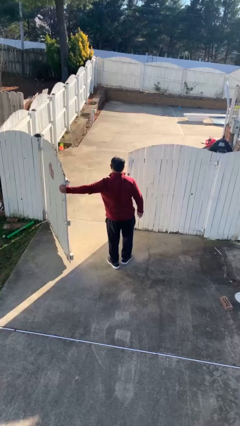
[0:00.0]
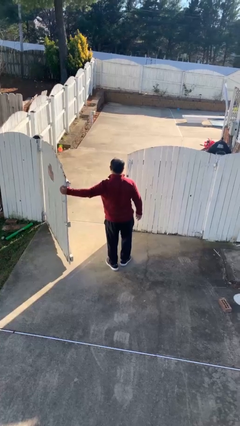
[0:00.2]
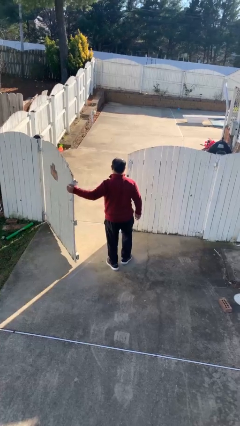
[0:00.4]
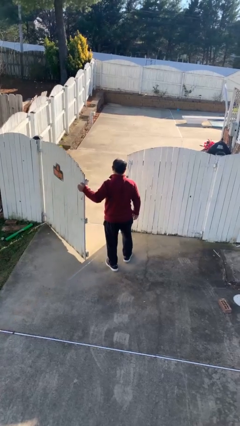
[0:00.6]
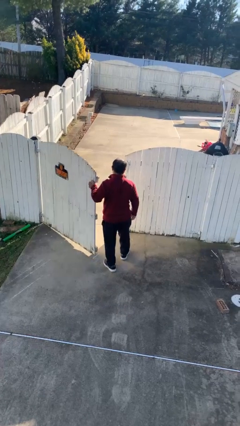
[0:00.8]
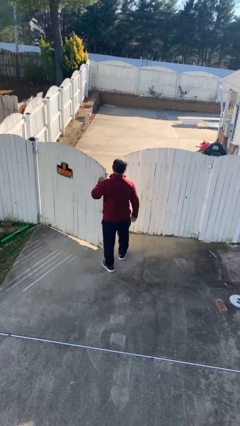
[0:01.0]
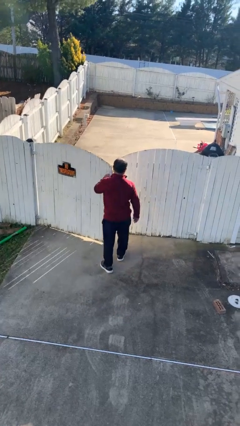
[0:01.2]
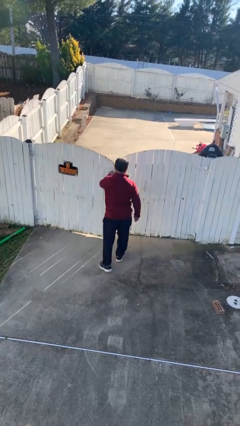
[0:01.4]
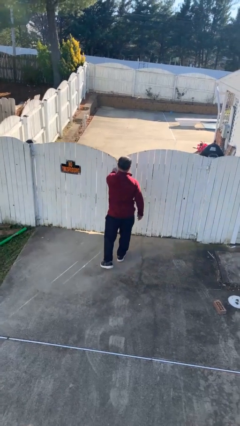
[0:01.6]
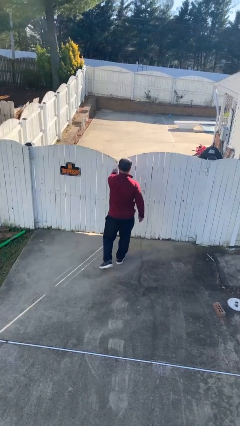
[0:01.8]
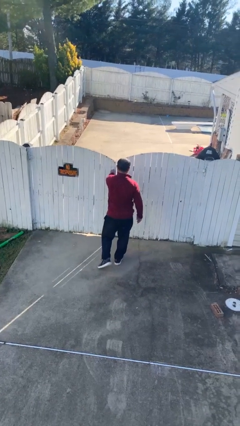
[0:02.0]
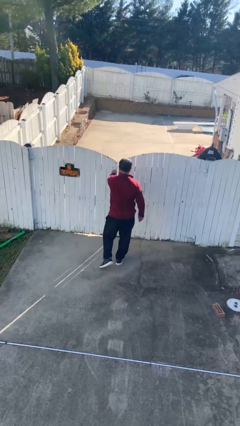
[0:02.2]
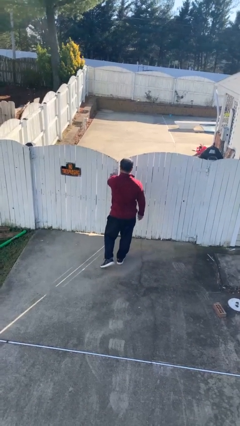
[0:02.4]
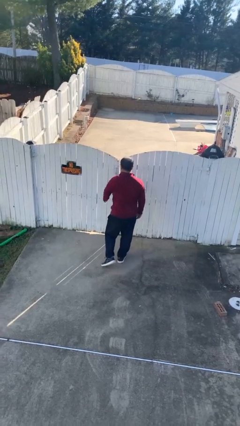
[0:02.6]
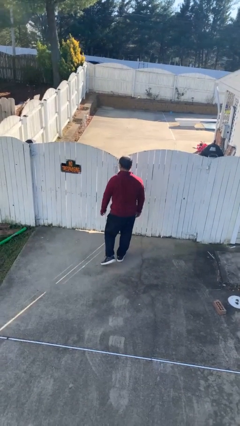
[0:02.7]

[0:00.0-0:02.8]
person closes facility door

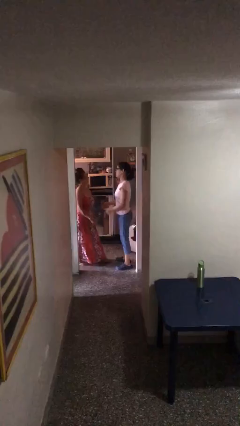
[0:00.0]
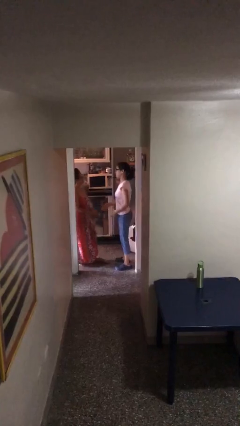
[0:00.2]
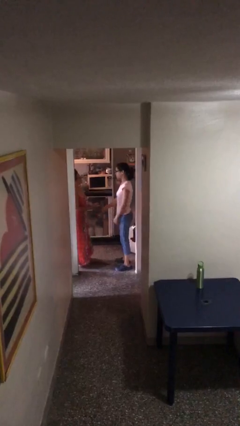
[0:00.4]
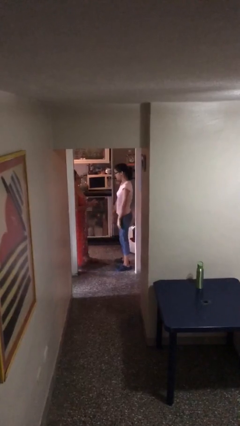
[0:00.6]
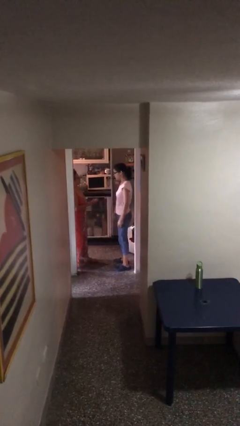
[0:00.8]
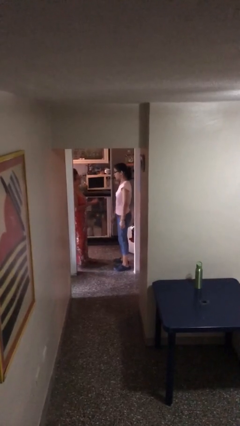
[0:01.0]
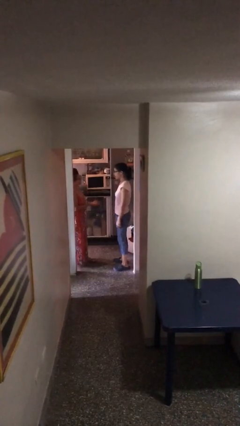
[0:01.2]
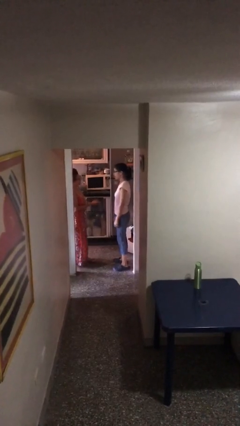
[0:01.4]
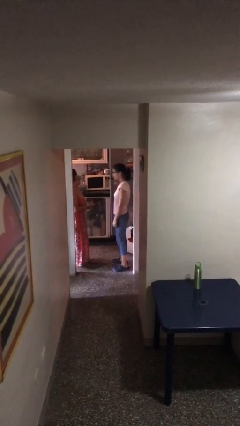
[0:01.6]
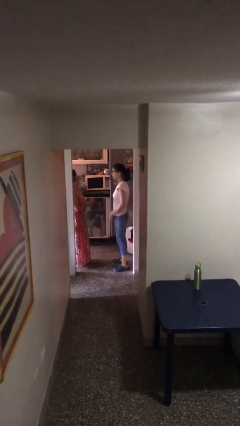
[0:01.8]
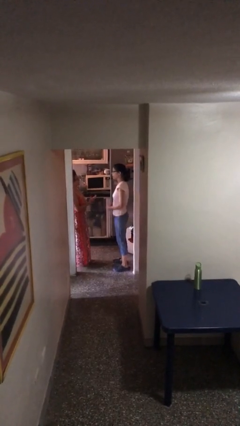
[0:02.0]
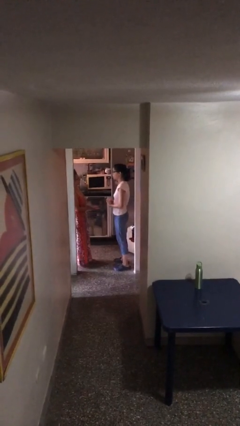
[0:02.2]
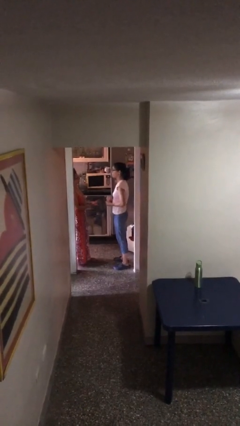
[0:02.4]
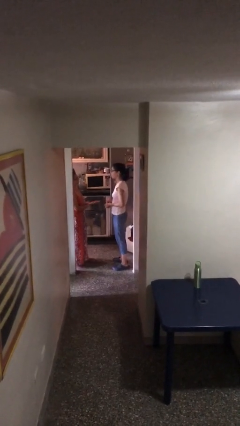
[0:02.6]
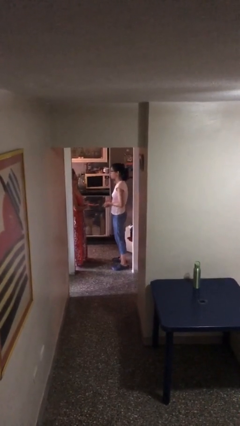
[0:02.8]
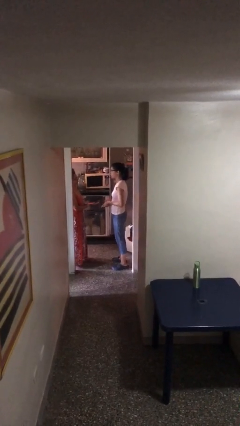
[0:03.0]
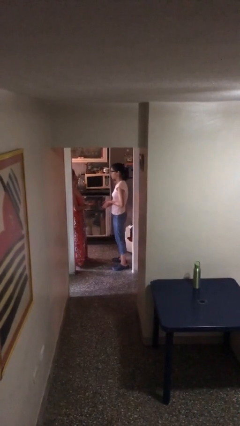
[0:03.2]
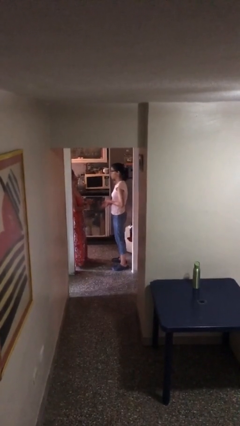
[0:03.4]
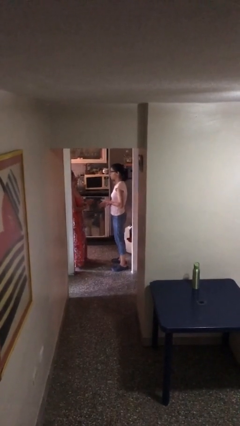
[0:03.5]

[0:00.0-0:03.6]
person talks to person

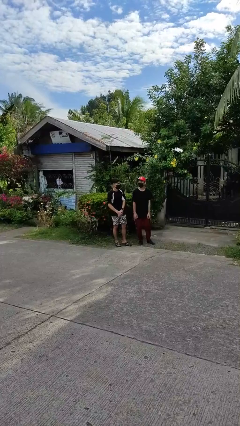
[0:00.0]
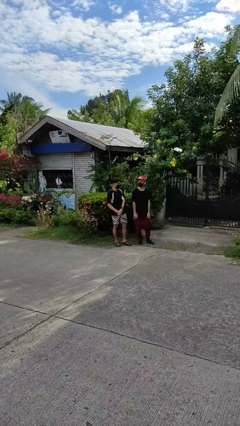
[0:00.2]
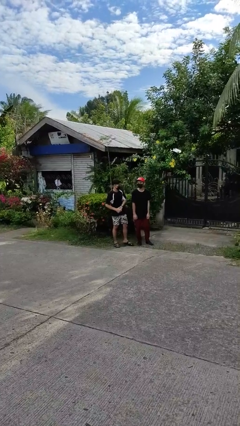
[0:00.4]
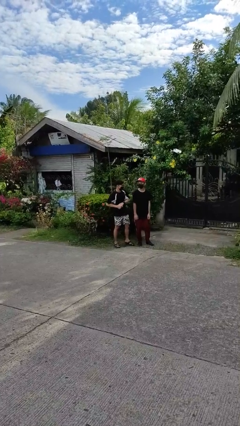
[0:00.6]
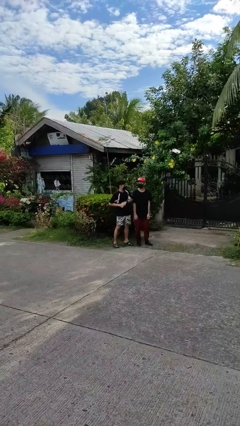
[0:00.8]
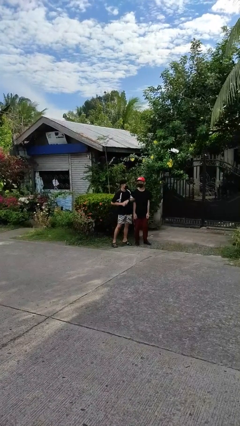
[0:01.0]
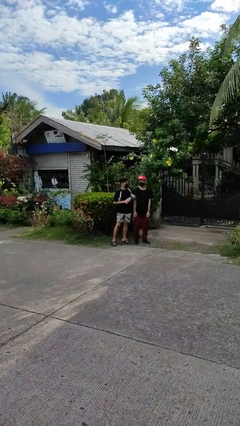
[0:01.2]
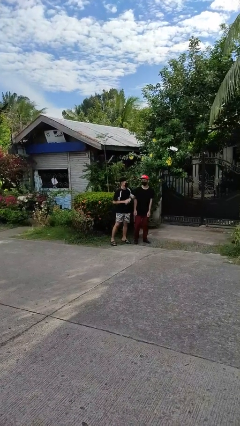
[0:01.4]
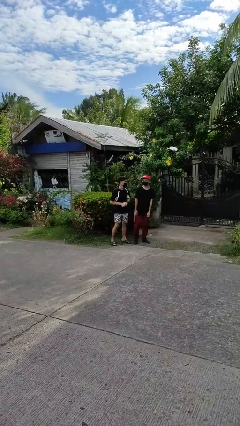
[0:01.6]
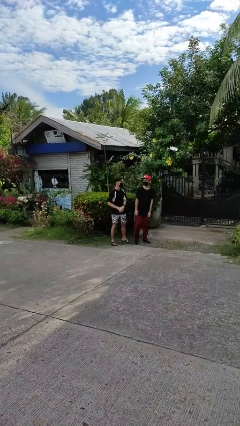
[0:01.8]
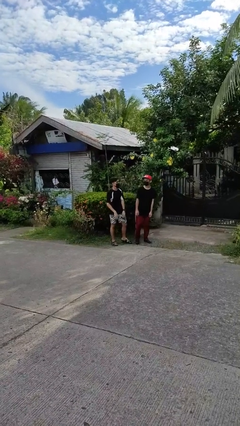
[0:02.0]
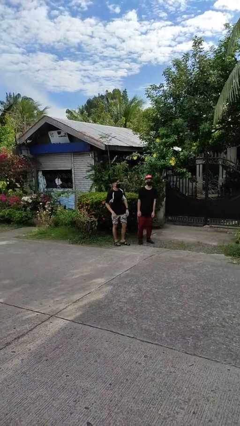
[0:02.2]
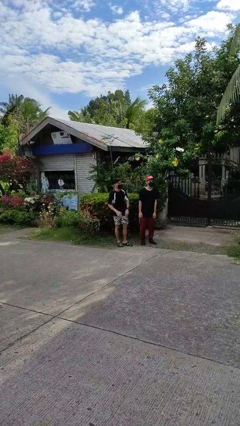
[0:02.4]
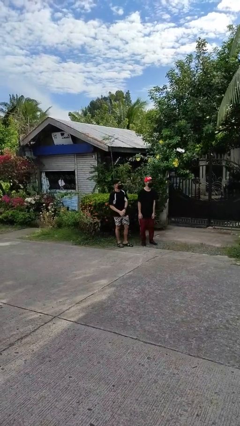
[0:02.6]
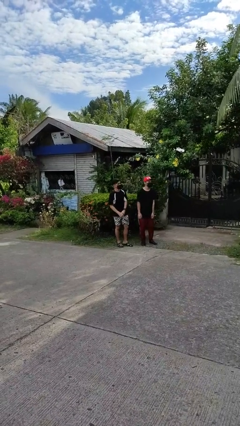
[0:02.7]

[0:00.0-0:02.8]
person nudges person with elbow

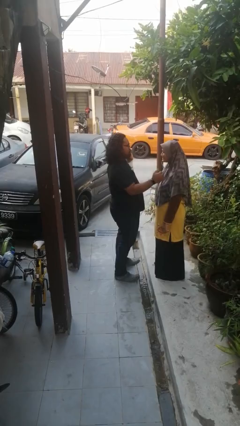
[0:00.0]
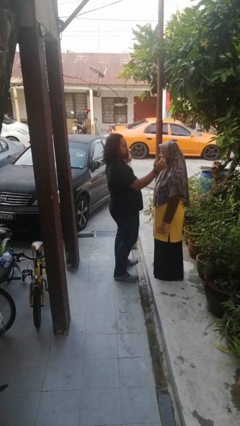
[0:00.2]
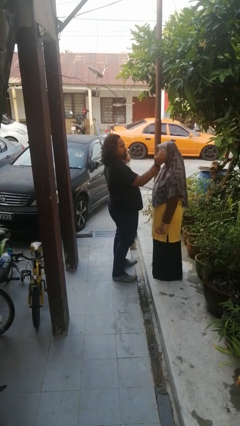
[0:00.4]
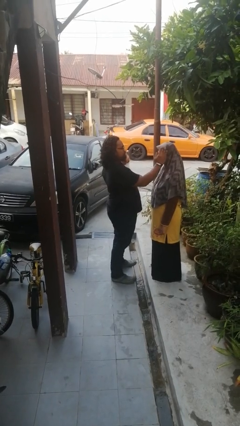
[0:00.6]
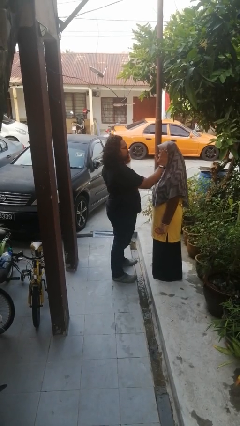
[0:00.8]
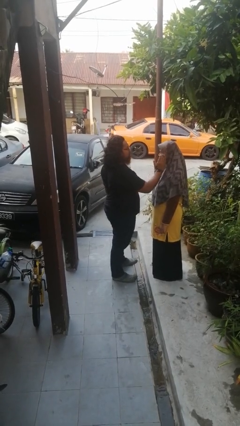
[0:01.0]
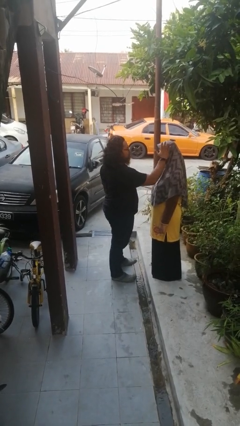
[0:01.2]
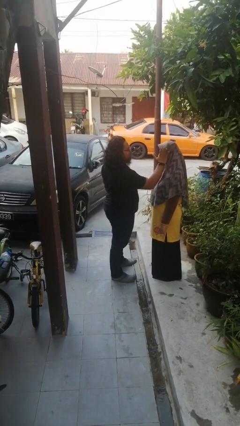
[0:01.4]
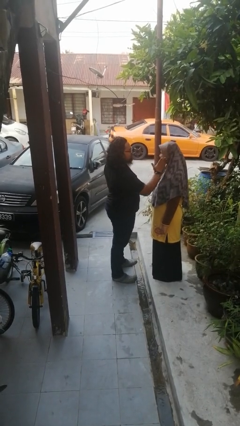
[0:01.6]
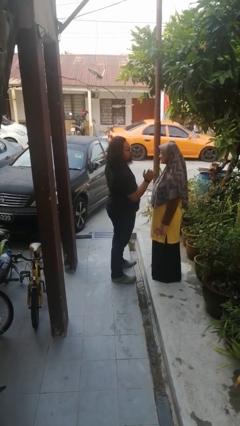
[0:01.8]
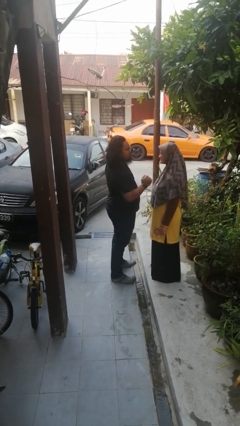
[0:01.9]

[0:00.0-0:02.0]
person touches face of person

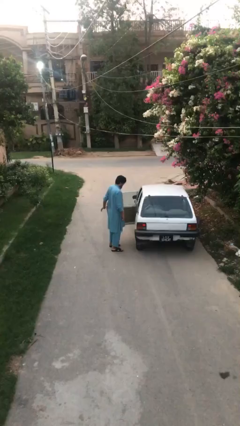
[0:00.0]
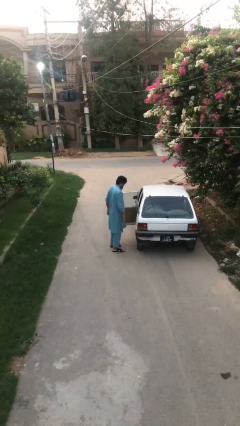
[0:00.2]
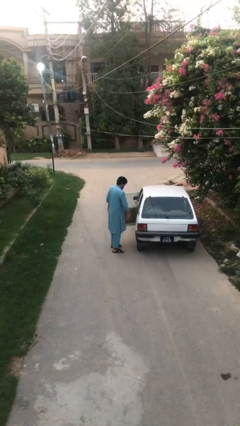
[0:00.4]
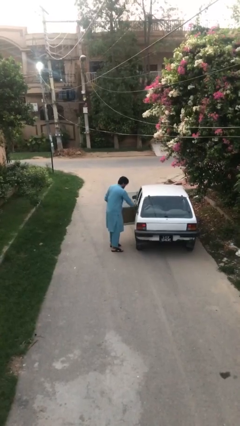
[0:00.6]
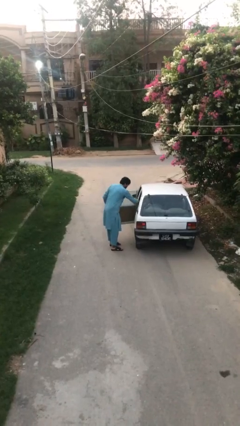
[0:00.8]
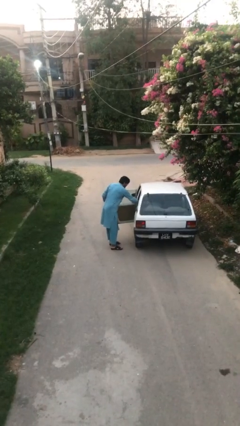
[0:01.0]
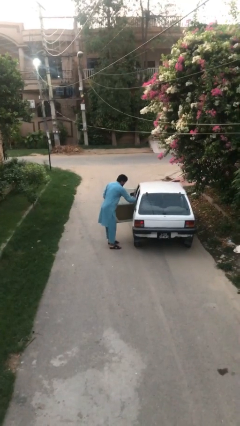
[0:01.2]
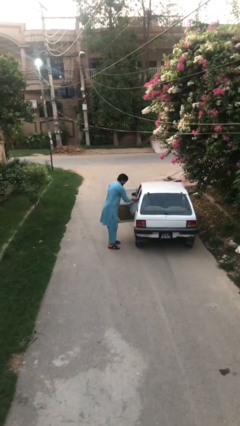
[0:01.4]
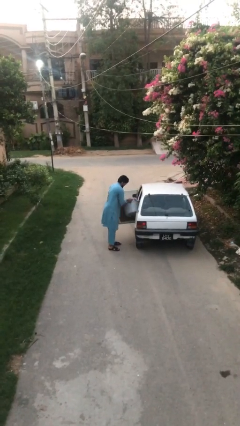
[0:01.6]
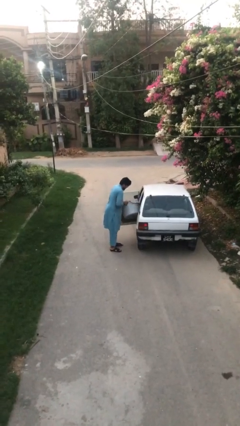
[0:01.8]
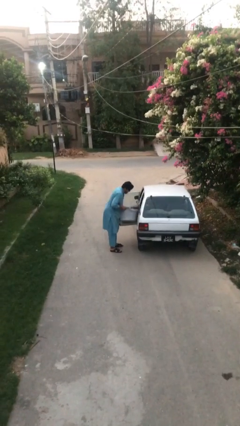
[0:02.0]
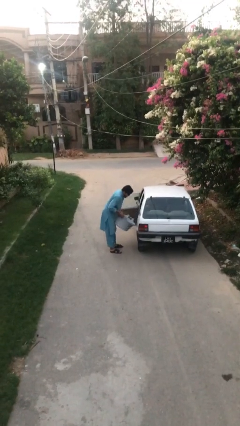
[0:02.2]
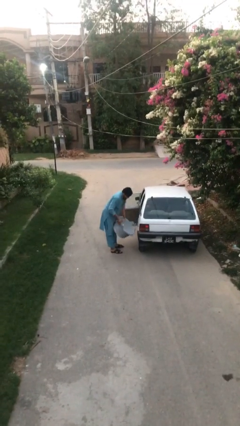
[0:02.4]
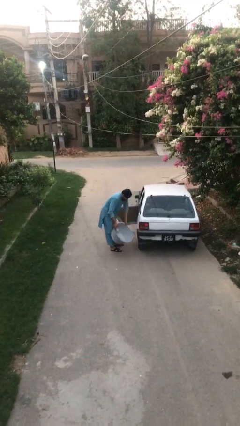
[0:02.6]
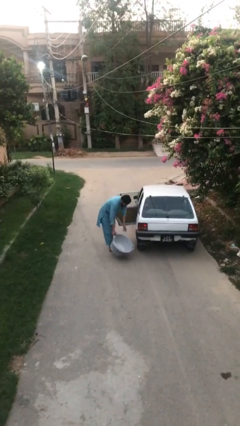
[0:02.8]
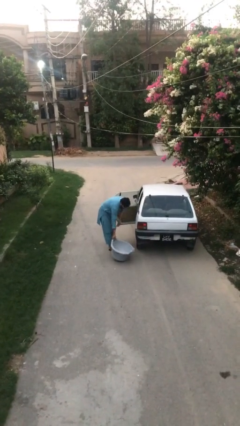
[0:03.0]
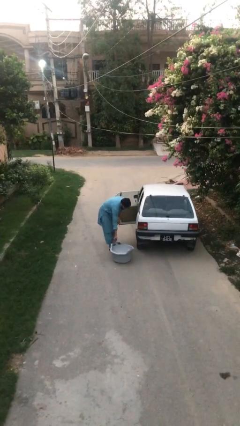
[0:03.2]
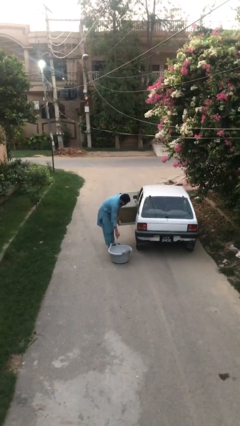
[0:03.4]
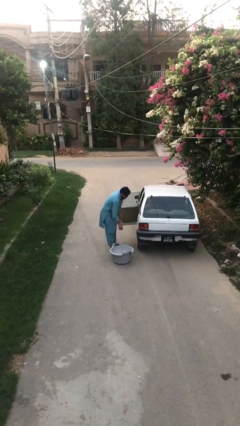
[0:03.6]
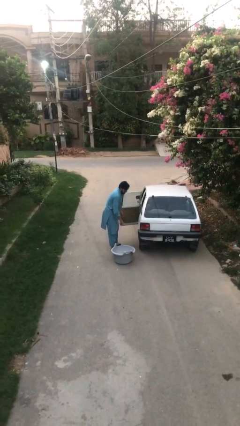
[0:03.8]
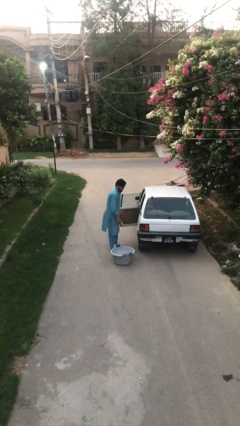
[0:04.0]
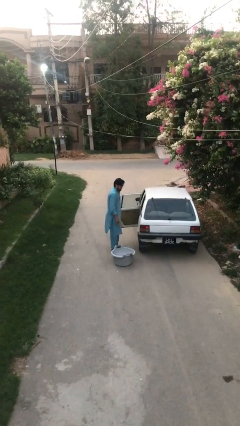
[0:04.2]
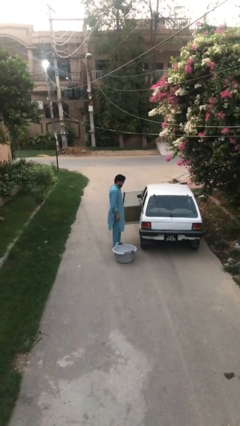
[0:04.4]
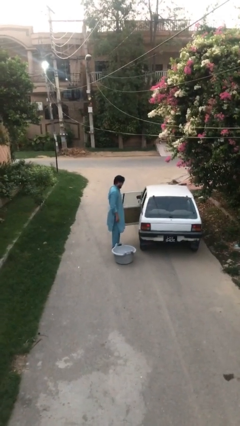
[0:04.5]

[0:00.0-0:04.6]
person unloads car

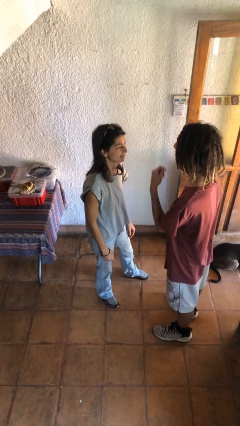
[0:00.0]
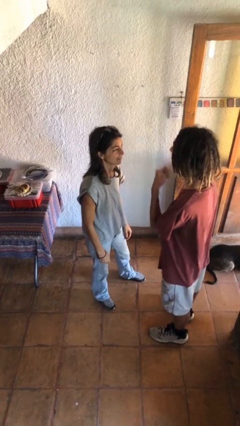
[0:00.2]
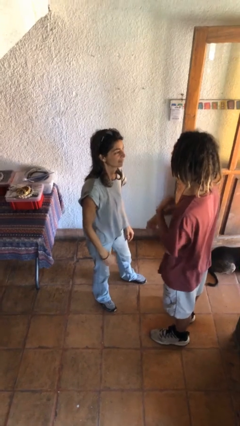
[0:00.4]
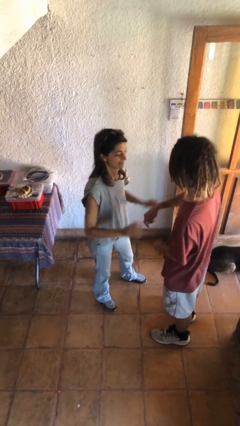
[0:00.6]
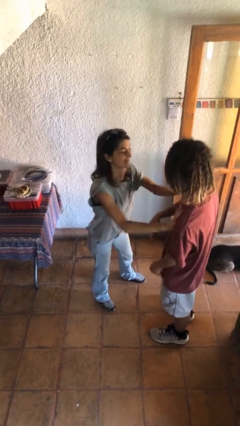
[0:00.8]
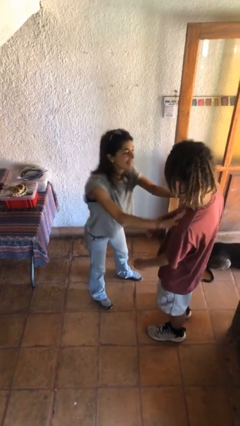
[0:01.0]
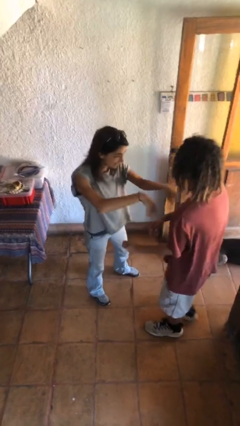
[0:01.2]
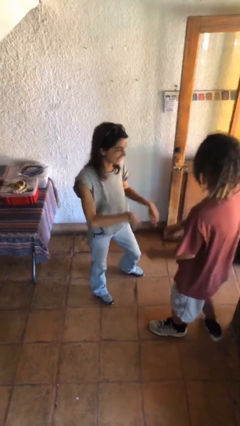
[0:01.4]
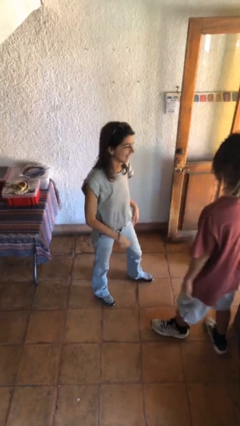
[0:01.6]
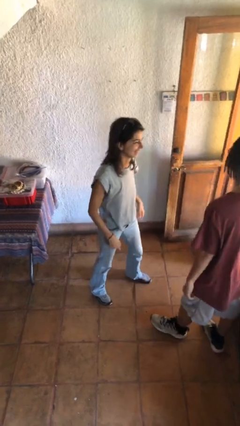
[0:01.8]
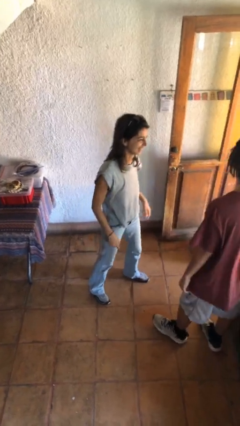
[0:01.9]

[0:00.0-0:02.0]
person shoves person
